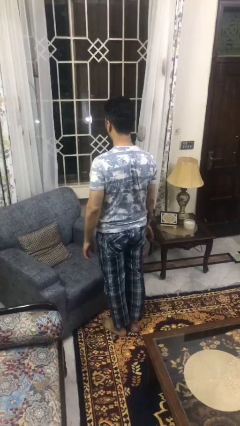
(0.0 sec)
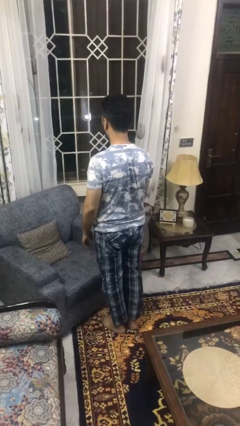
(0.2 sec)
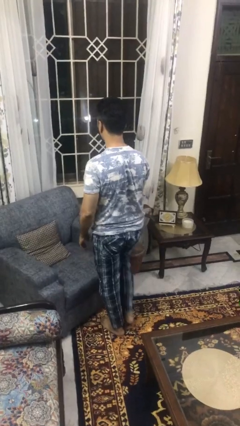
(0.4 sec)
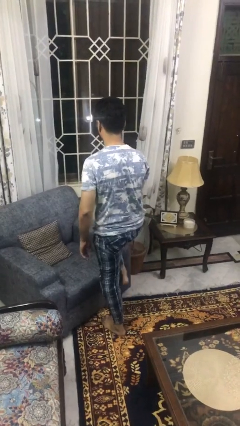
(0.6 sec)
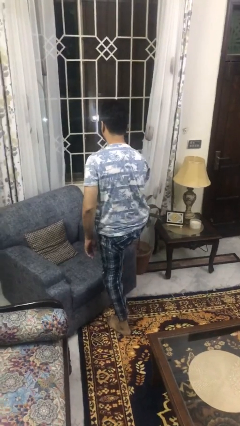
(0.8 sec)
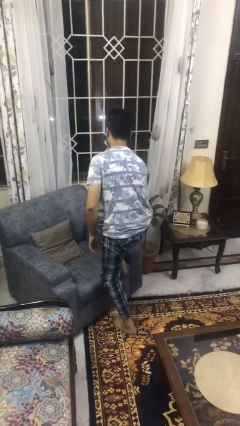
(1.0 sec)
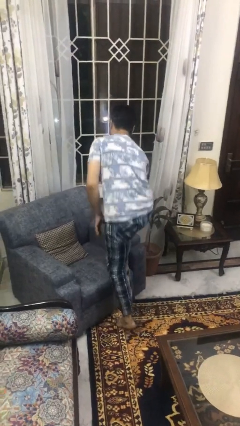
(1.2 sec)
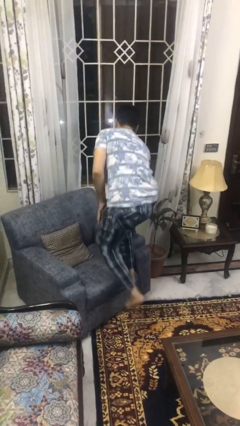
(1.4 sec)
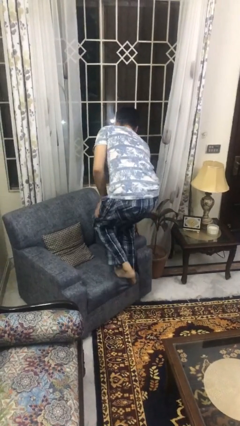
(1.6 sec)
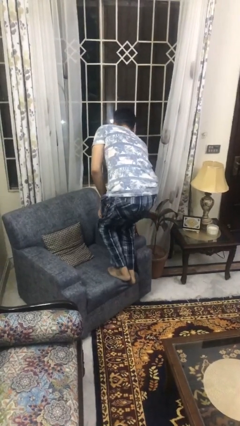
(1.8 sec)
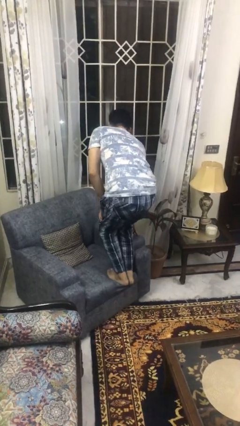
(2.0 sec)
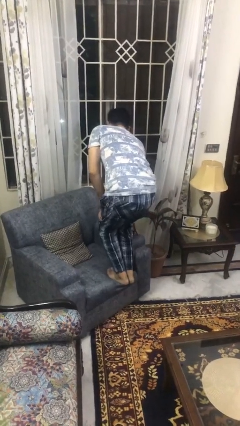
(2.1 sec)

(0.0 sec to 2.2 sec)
person climbs on couch

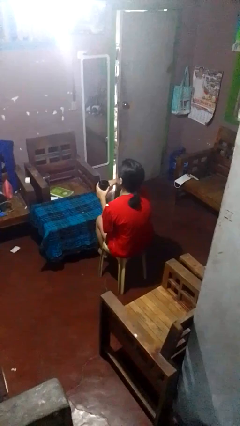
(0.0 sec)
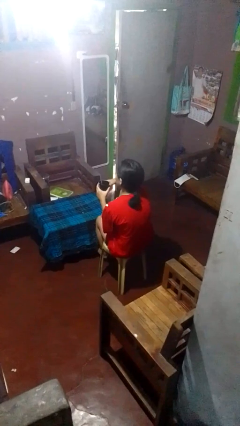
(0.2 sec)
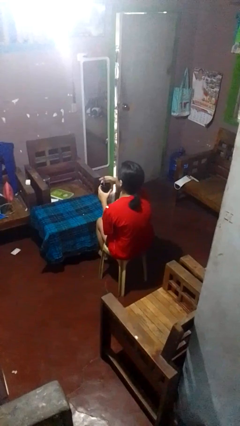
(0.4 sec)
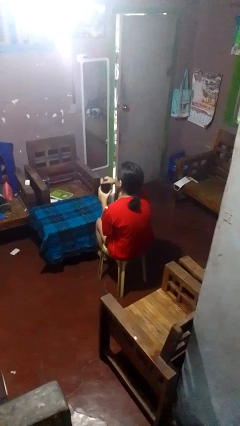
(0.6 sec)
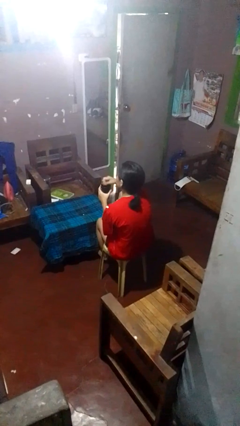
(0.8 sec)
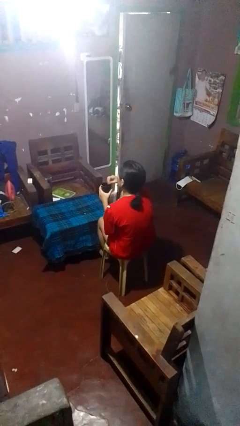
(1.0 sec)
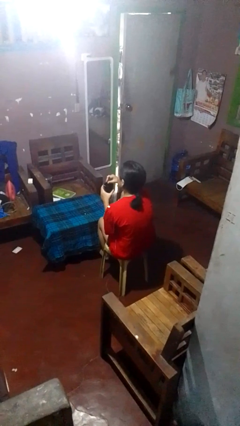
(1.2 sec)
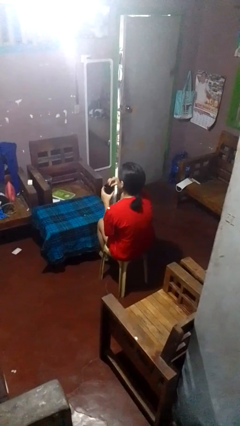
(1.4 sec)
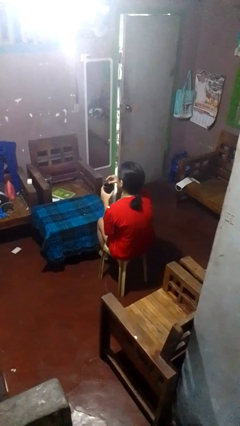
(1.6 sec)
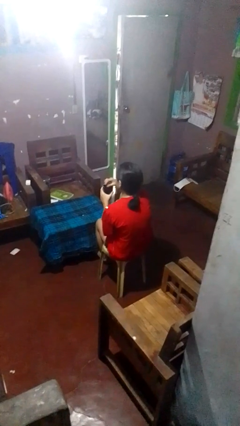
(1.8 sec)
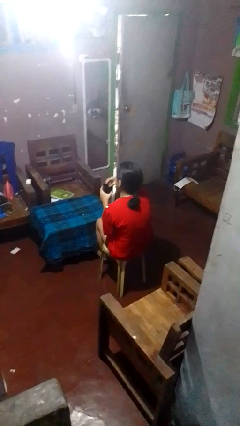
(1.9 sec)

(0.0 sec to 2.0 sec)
person stirs mug

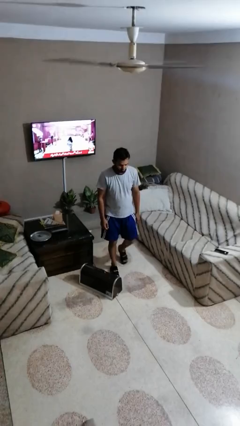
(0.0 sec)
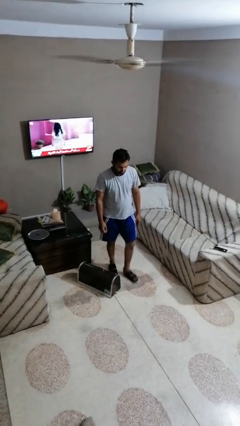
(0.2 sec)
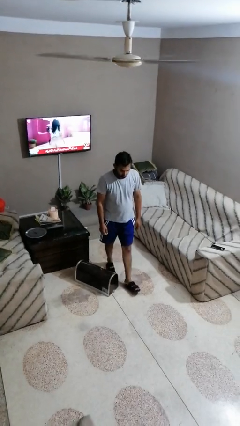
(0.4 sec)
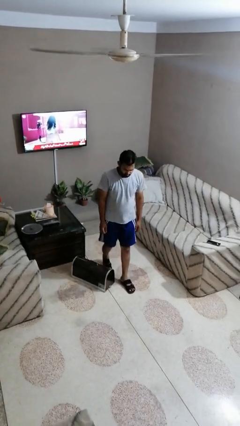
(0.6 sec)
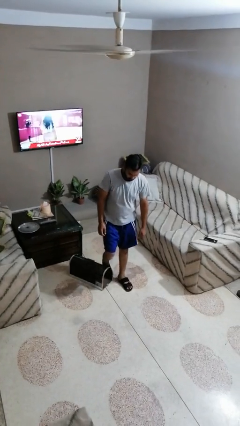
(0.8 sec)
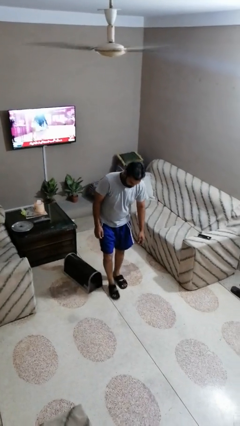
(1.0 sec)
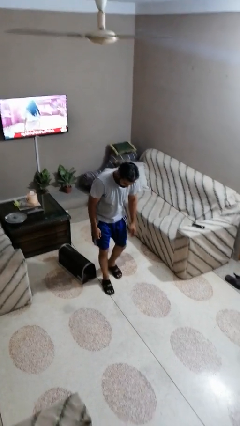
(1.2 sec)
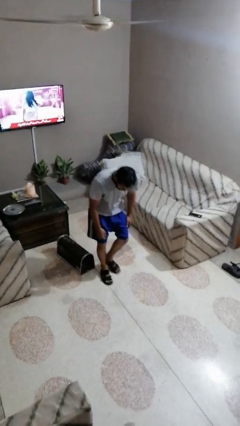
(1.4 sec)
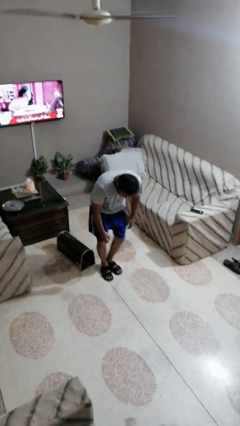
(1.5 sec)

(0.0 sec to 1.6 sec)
person trips on object on floor

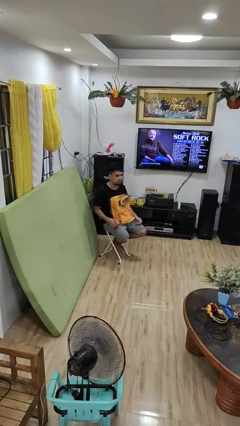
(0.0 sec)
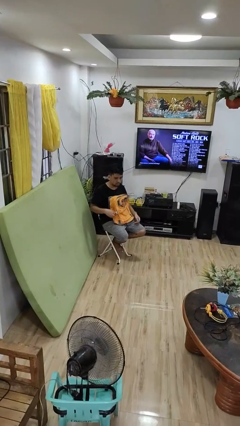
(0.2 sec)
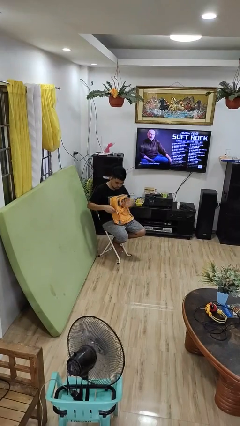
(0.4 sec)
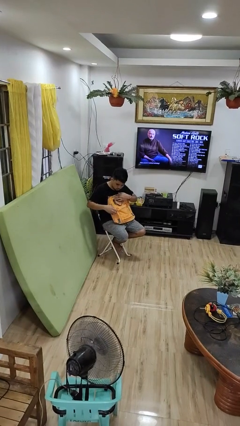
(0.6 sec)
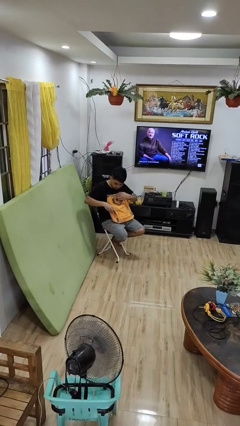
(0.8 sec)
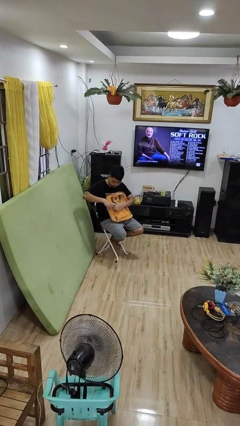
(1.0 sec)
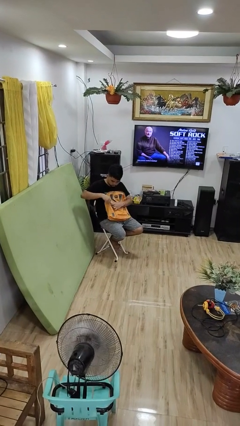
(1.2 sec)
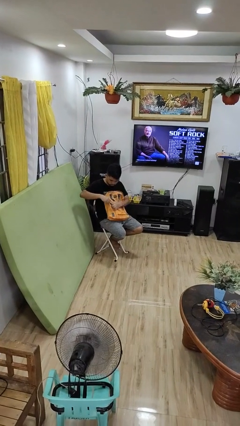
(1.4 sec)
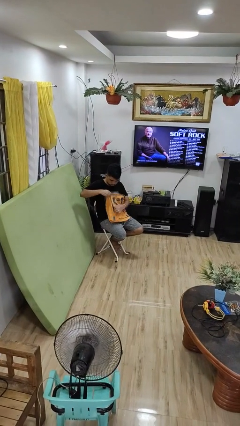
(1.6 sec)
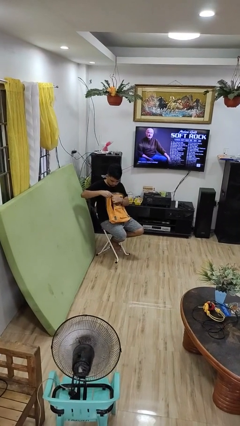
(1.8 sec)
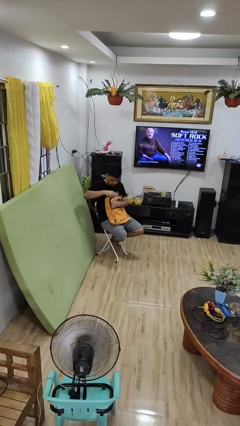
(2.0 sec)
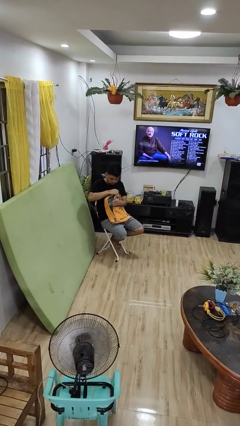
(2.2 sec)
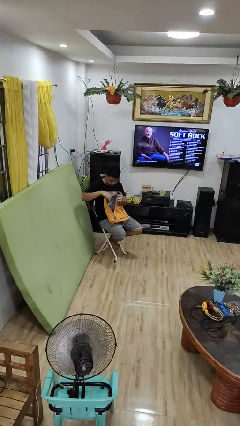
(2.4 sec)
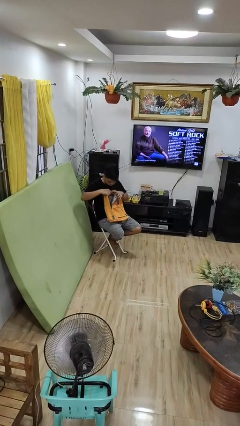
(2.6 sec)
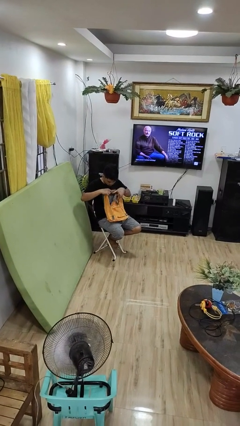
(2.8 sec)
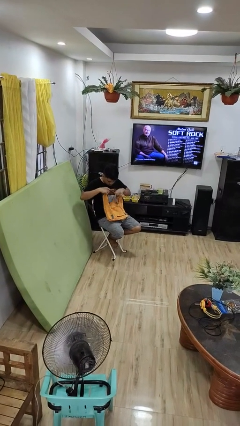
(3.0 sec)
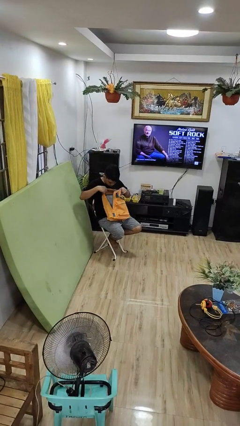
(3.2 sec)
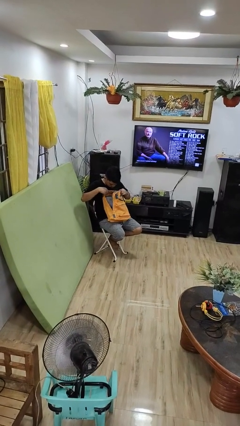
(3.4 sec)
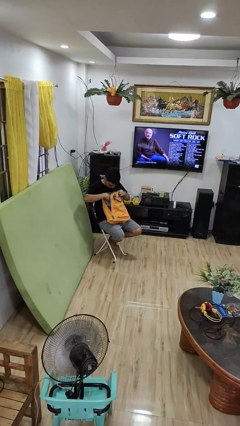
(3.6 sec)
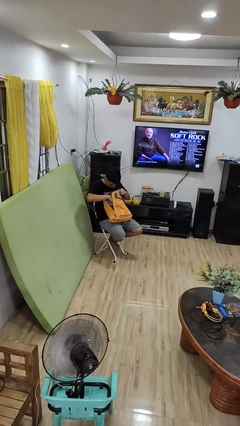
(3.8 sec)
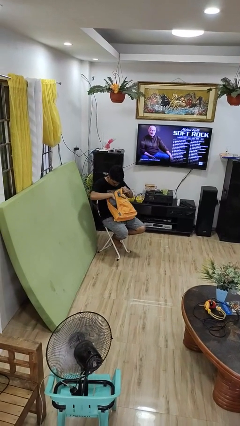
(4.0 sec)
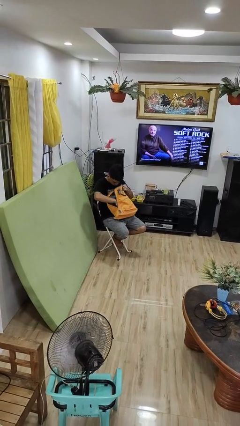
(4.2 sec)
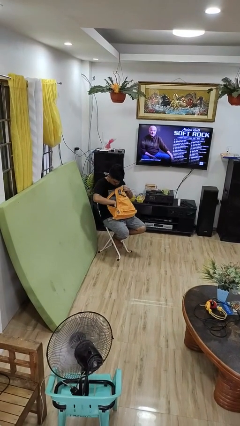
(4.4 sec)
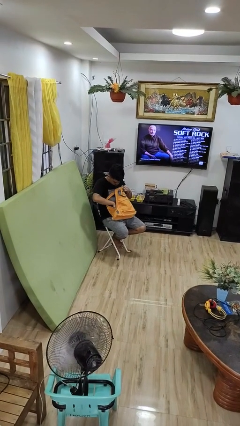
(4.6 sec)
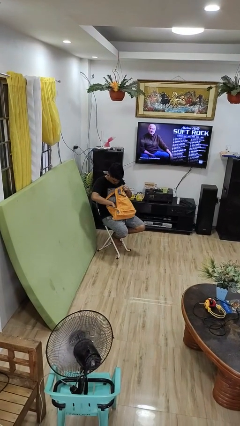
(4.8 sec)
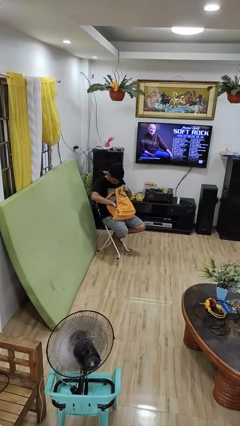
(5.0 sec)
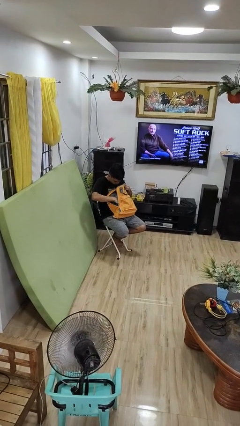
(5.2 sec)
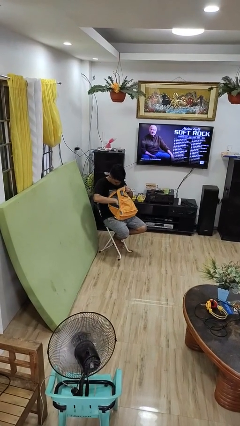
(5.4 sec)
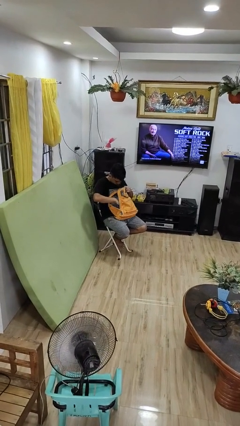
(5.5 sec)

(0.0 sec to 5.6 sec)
person searches in backpack

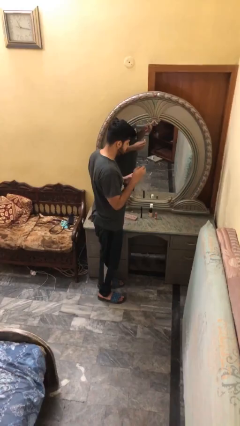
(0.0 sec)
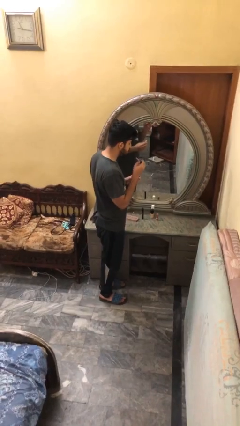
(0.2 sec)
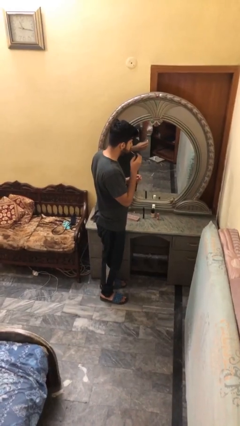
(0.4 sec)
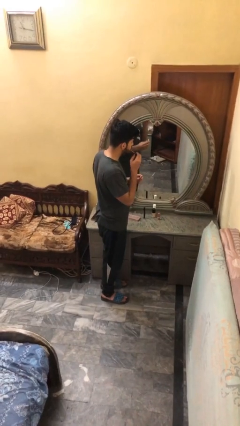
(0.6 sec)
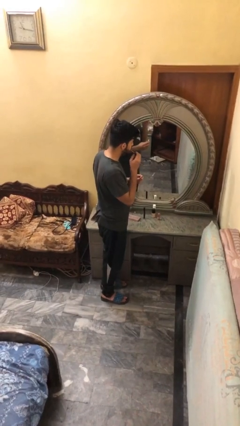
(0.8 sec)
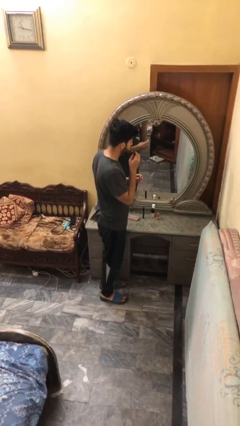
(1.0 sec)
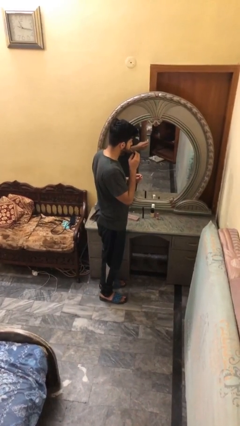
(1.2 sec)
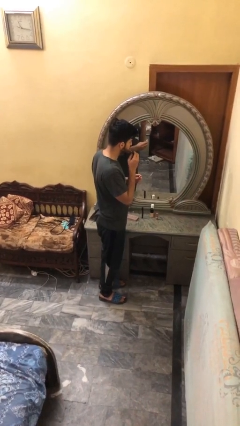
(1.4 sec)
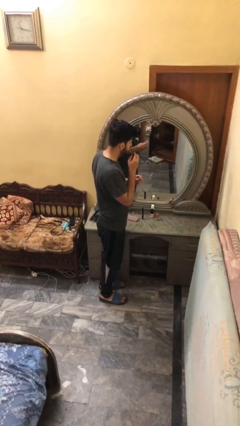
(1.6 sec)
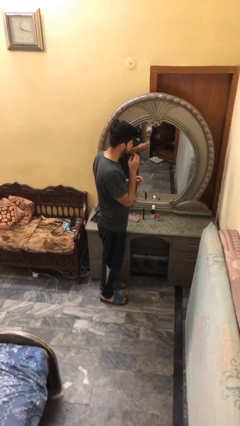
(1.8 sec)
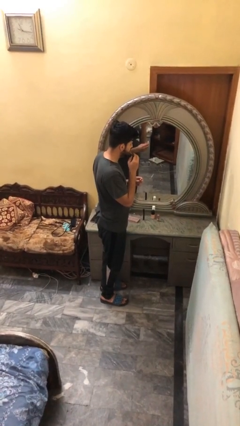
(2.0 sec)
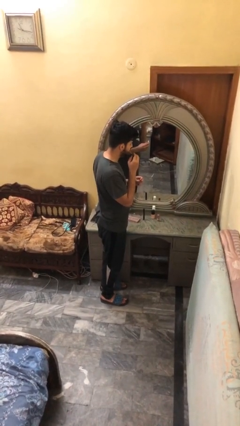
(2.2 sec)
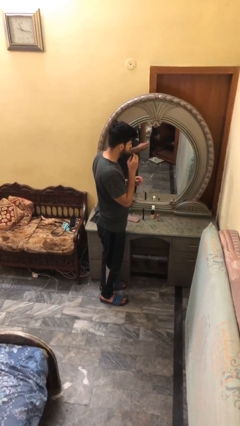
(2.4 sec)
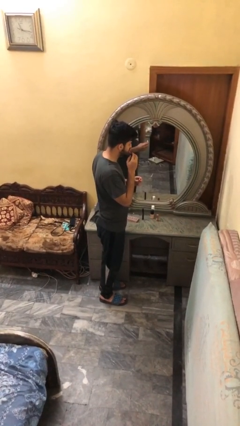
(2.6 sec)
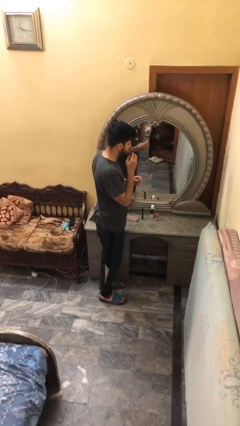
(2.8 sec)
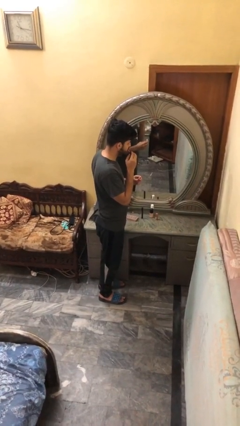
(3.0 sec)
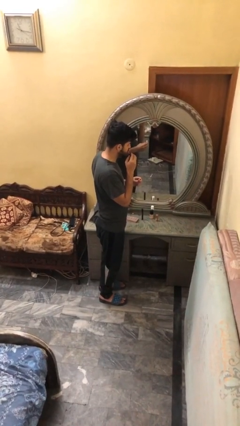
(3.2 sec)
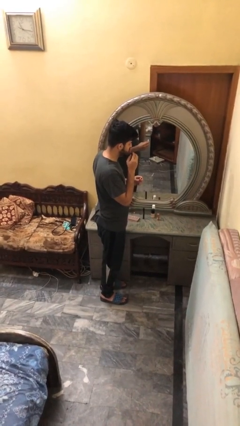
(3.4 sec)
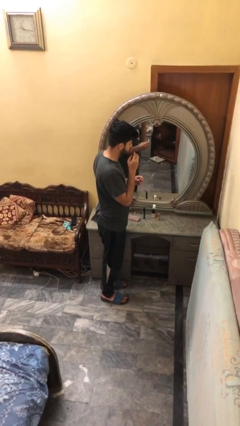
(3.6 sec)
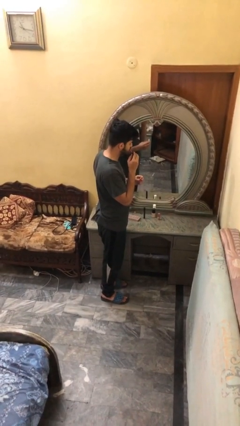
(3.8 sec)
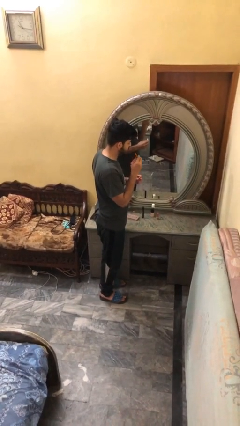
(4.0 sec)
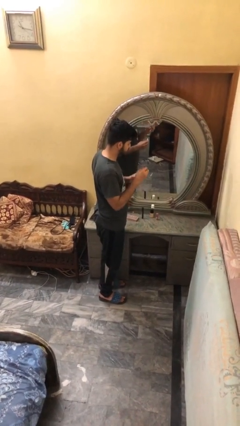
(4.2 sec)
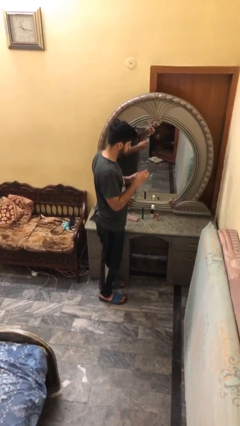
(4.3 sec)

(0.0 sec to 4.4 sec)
person applies lip makeup

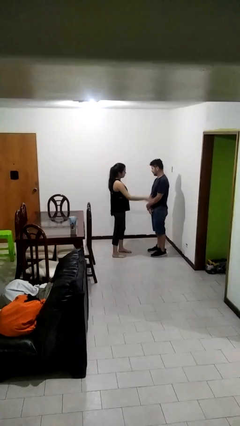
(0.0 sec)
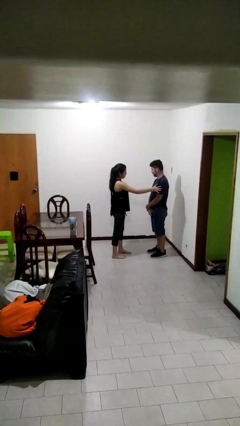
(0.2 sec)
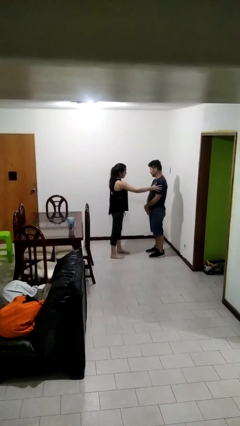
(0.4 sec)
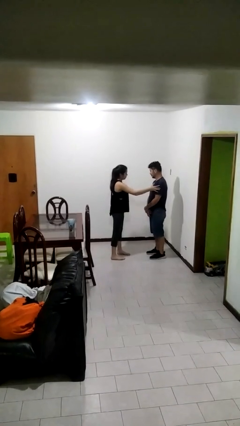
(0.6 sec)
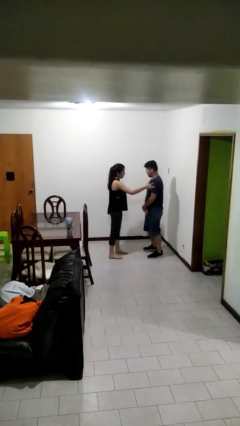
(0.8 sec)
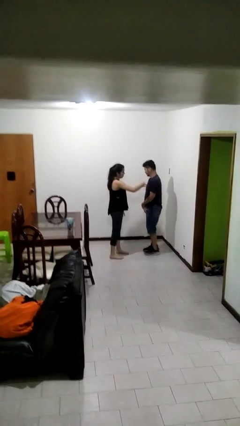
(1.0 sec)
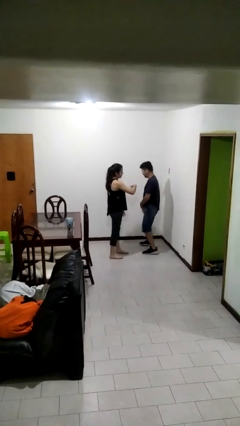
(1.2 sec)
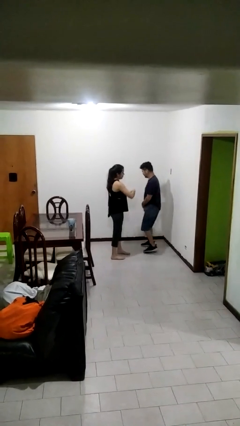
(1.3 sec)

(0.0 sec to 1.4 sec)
person shoves person
